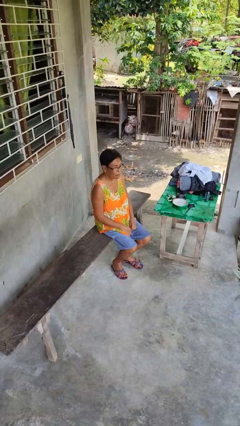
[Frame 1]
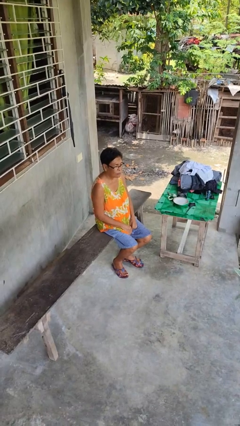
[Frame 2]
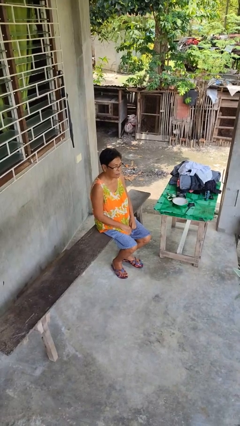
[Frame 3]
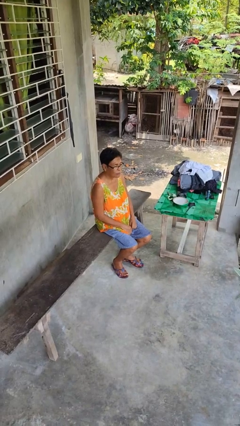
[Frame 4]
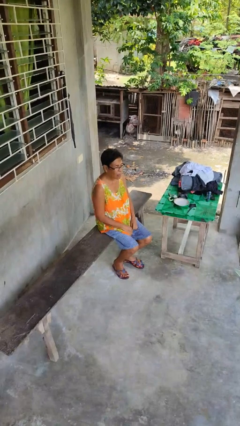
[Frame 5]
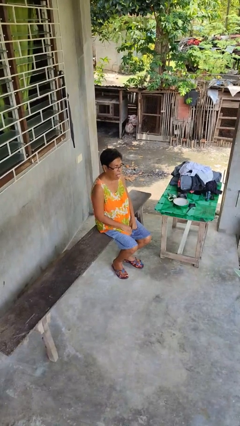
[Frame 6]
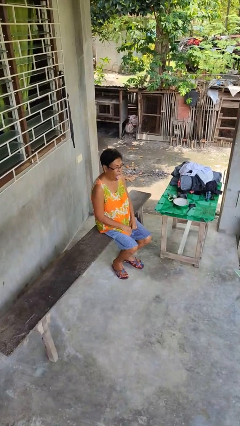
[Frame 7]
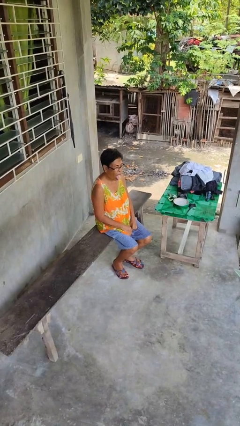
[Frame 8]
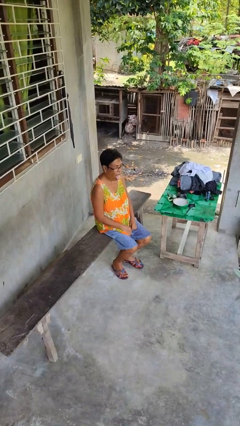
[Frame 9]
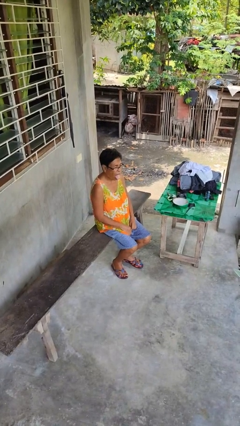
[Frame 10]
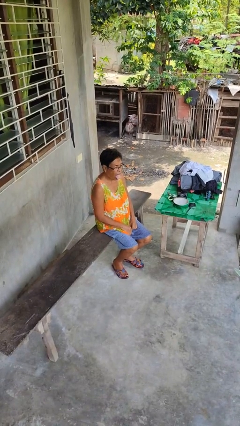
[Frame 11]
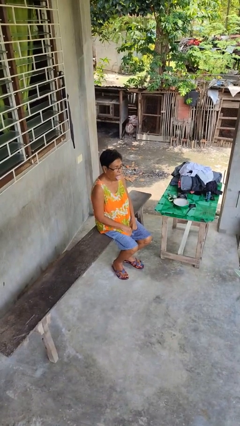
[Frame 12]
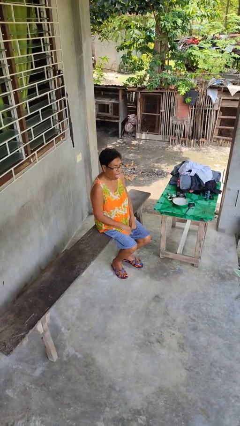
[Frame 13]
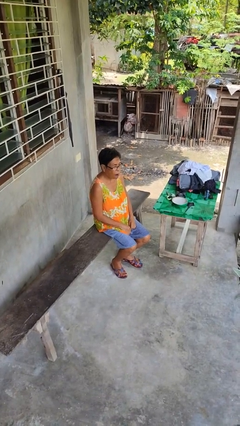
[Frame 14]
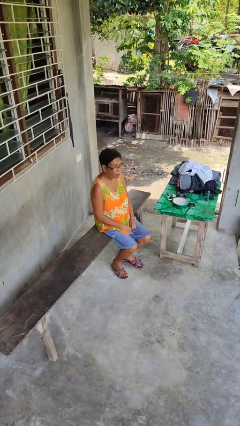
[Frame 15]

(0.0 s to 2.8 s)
person sticks out tongue

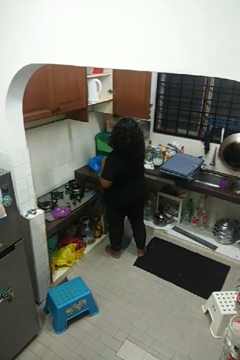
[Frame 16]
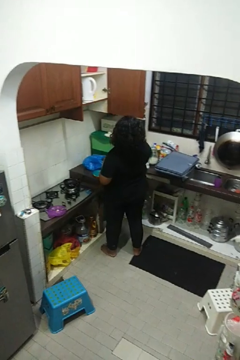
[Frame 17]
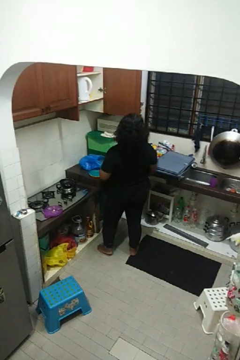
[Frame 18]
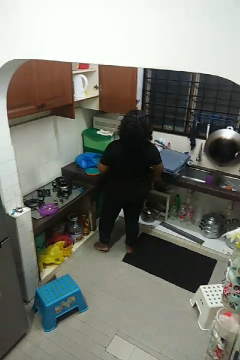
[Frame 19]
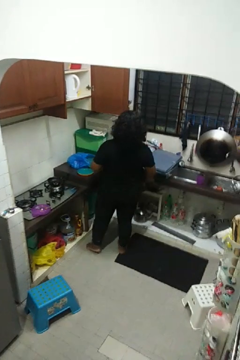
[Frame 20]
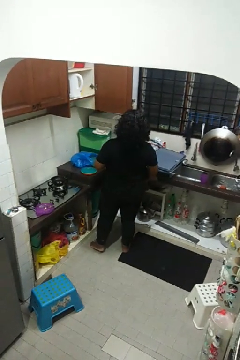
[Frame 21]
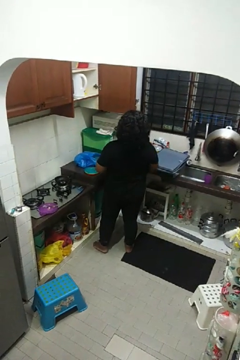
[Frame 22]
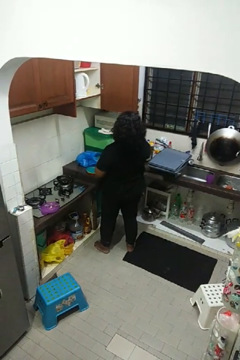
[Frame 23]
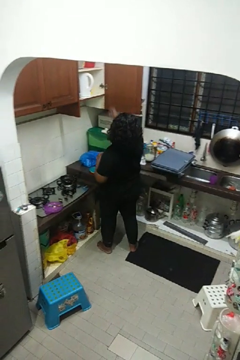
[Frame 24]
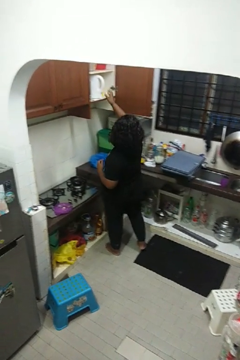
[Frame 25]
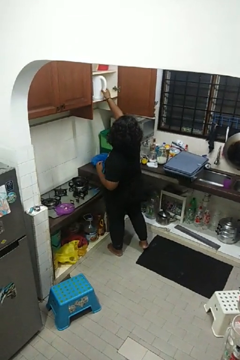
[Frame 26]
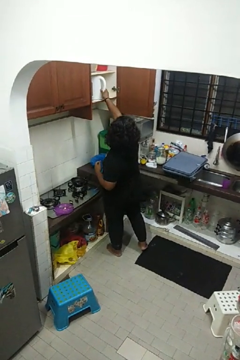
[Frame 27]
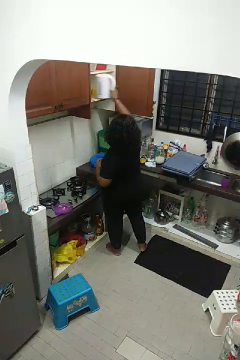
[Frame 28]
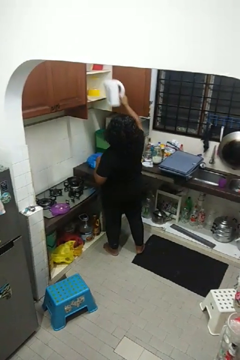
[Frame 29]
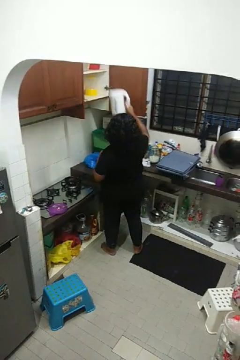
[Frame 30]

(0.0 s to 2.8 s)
person takes object from cabinet

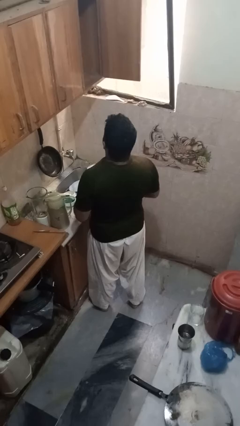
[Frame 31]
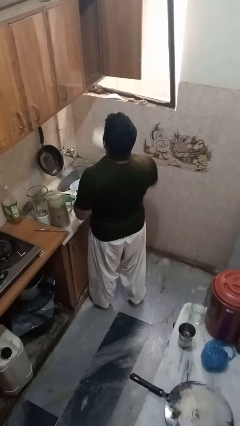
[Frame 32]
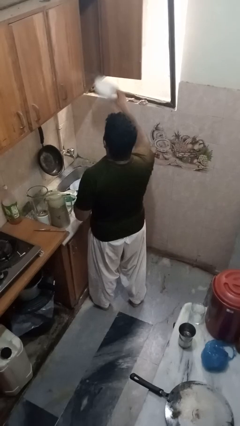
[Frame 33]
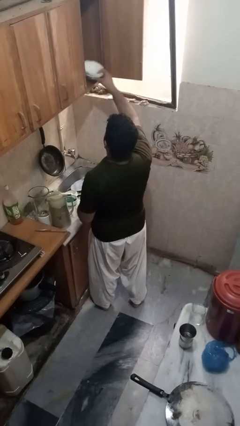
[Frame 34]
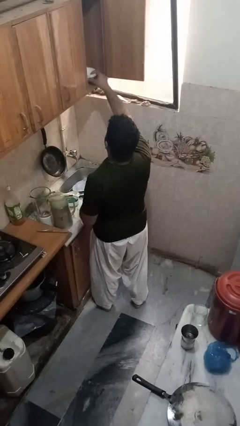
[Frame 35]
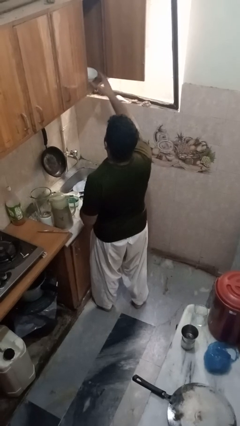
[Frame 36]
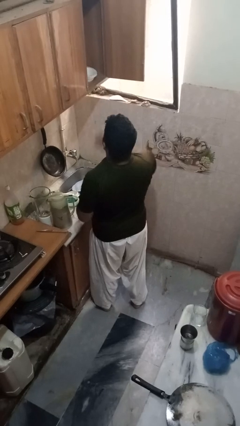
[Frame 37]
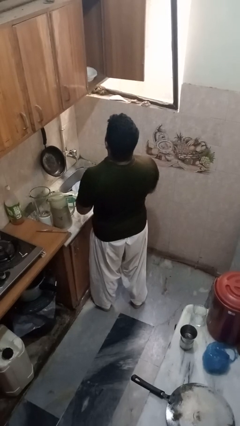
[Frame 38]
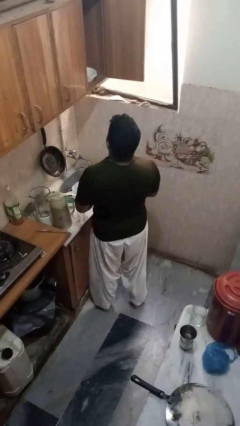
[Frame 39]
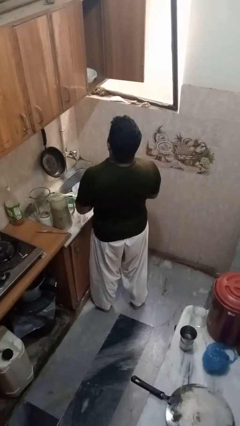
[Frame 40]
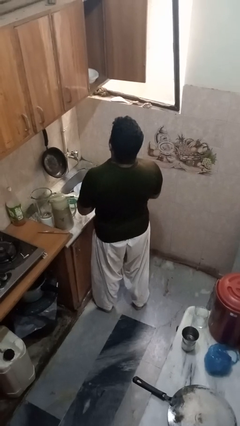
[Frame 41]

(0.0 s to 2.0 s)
person puts object in cabinet

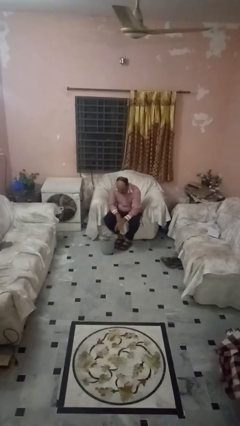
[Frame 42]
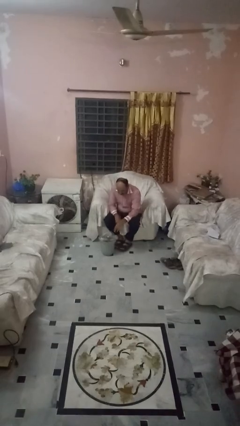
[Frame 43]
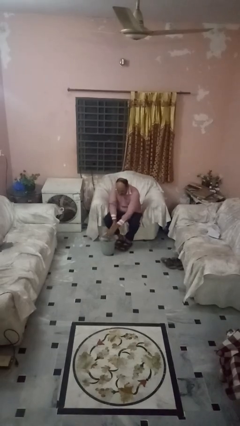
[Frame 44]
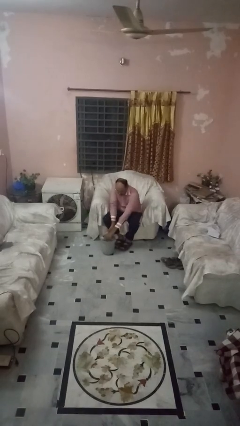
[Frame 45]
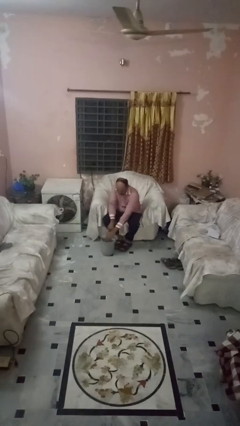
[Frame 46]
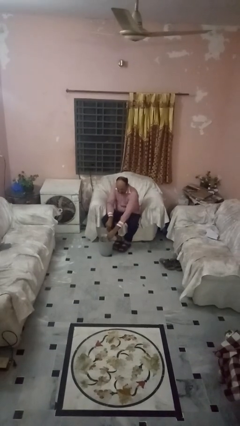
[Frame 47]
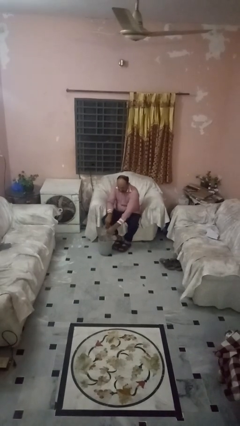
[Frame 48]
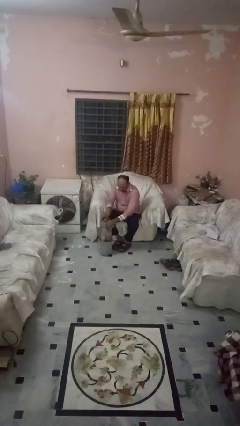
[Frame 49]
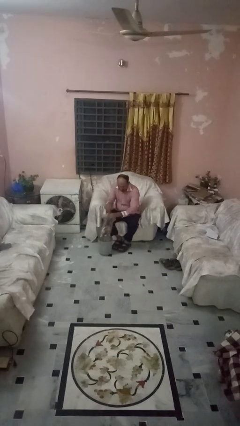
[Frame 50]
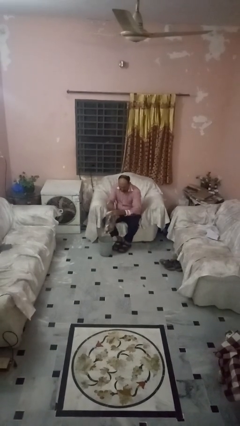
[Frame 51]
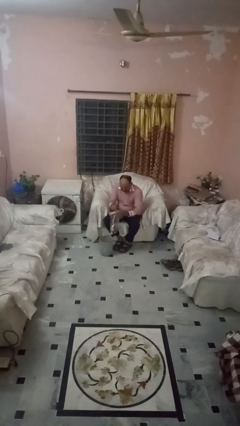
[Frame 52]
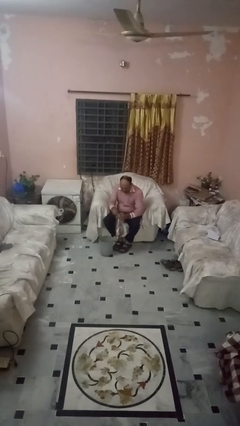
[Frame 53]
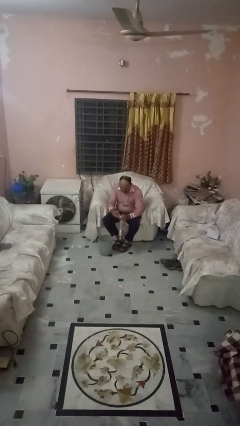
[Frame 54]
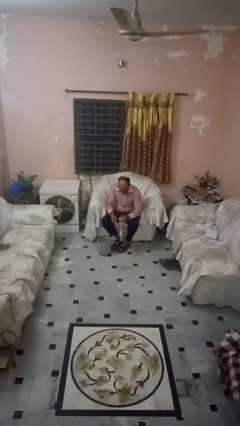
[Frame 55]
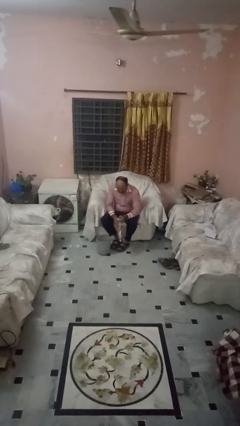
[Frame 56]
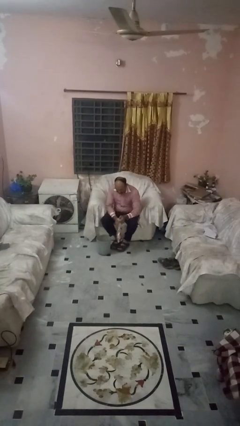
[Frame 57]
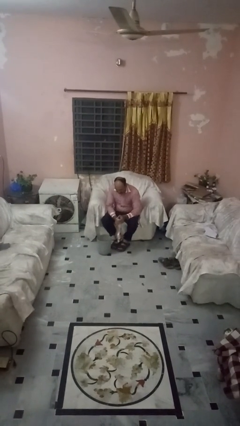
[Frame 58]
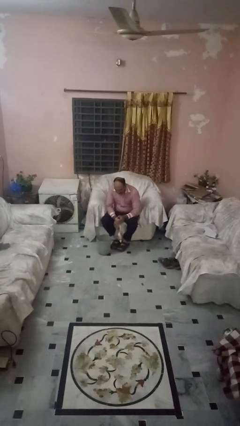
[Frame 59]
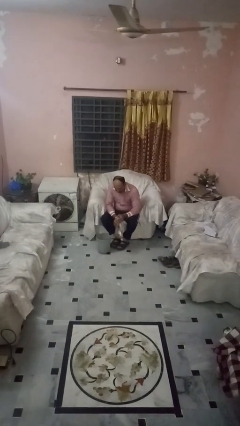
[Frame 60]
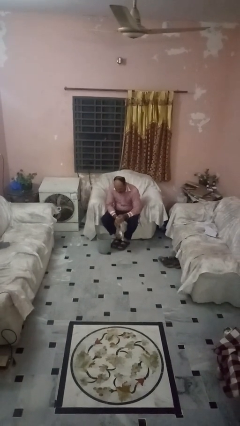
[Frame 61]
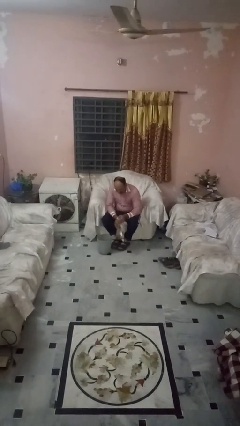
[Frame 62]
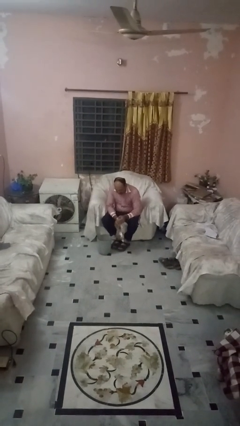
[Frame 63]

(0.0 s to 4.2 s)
person removes trashbag from trashcan

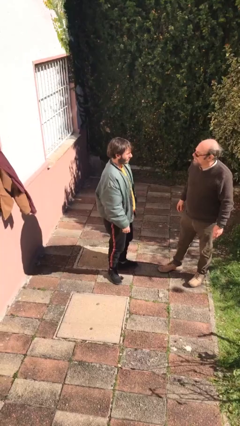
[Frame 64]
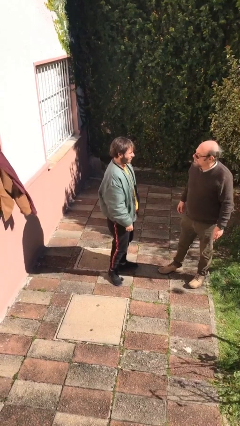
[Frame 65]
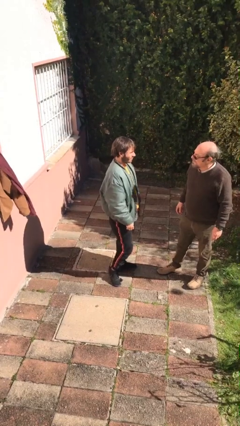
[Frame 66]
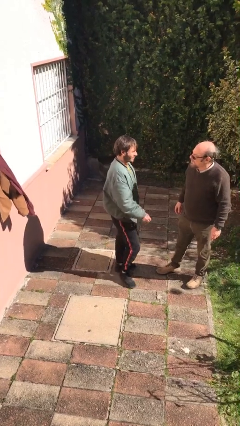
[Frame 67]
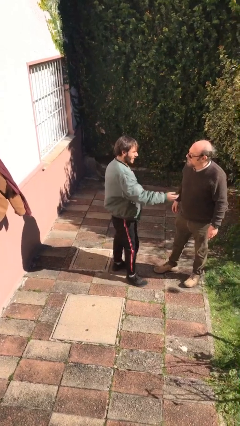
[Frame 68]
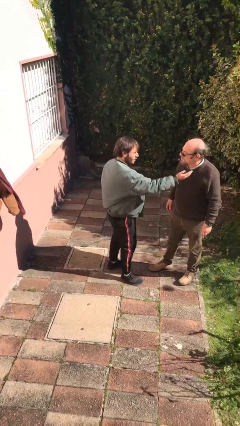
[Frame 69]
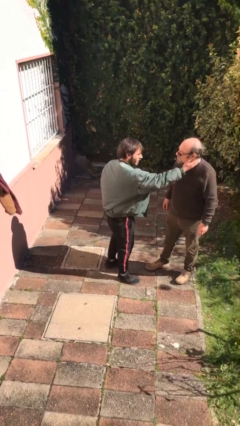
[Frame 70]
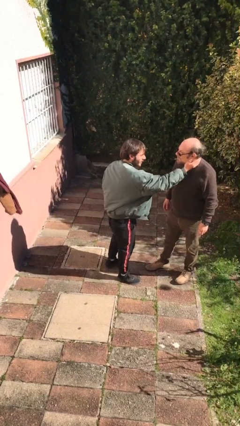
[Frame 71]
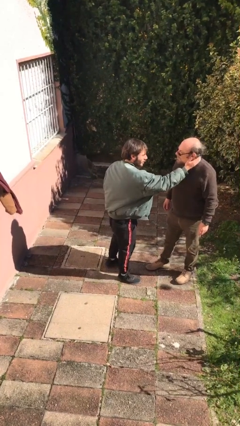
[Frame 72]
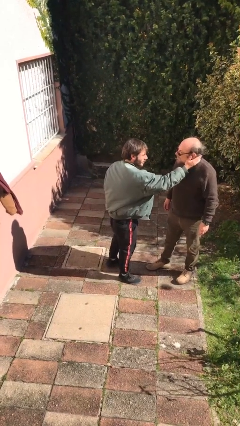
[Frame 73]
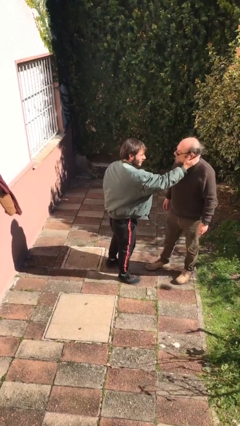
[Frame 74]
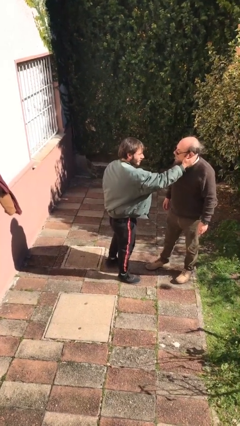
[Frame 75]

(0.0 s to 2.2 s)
person touches face of person

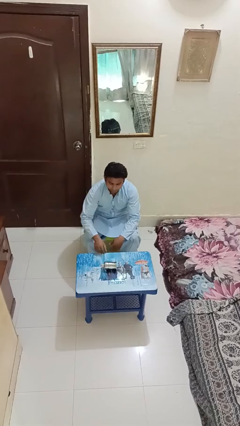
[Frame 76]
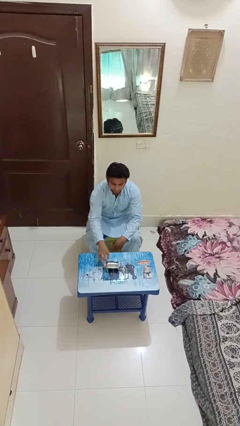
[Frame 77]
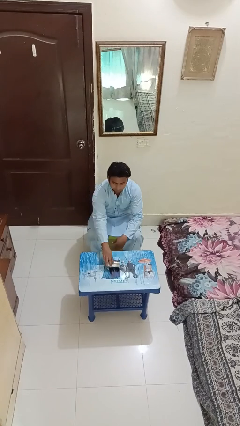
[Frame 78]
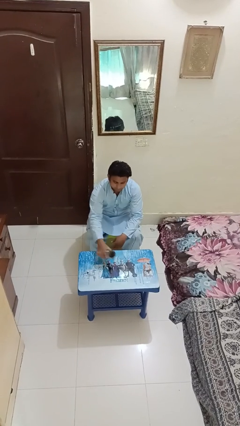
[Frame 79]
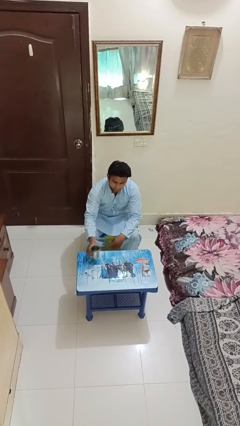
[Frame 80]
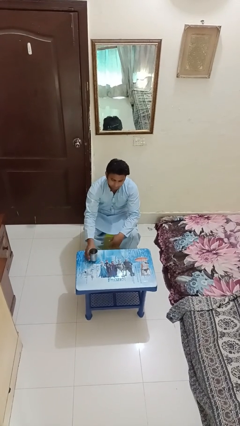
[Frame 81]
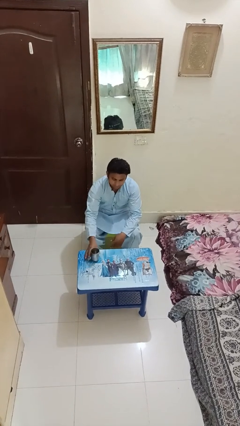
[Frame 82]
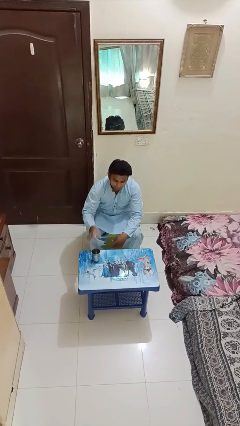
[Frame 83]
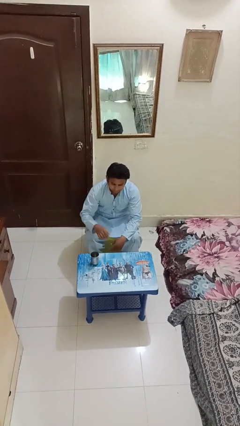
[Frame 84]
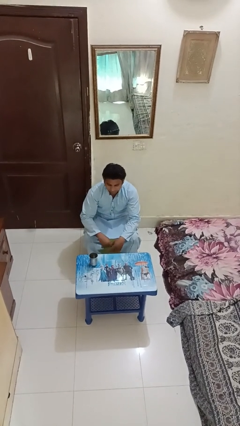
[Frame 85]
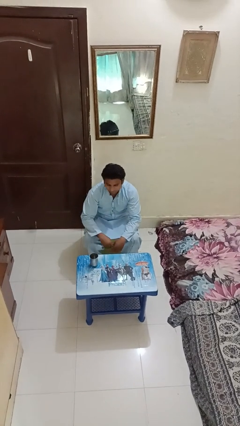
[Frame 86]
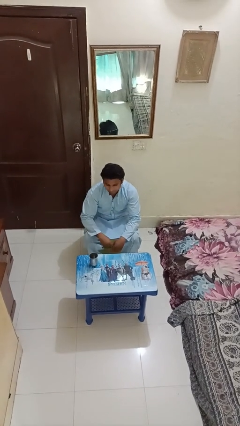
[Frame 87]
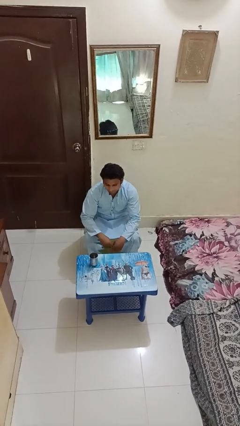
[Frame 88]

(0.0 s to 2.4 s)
person sets upright glass

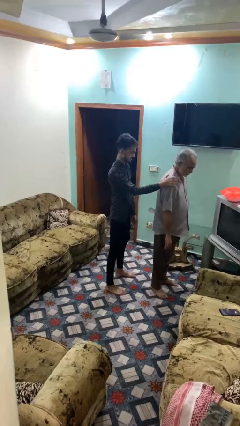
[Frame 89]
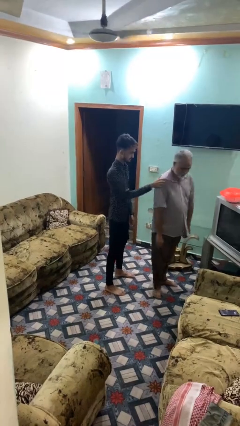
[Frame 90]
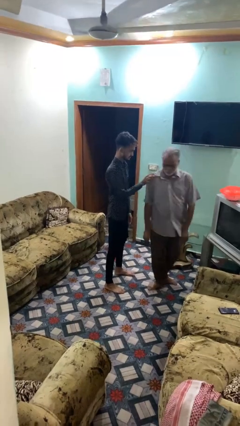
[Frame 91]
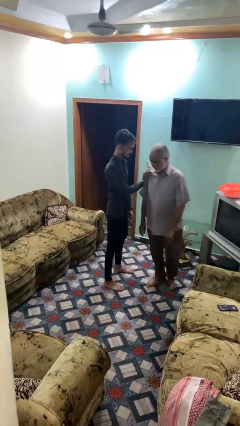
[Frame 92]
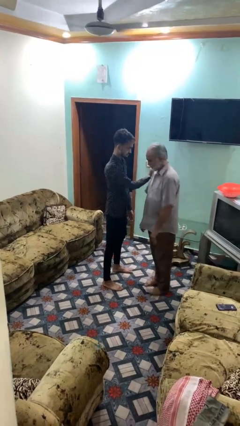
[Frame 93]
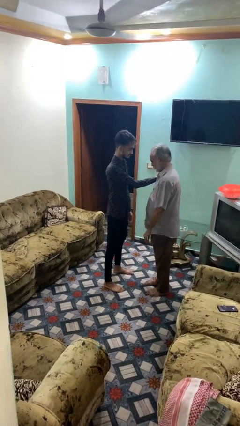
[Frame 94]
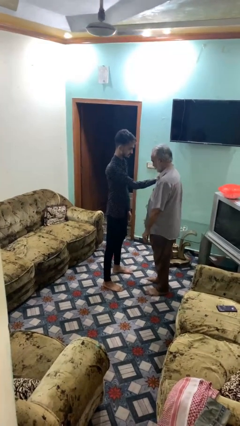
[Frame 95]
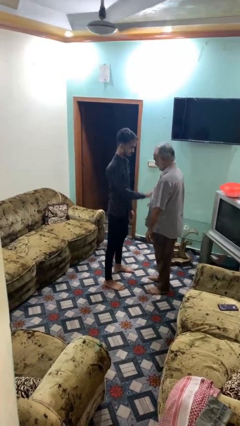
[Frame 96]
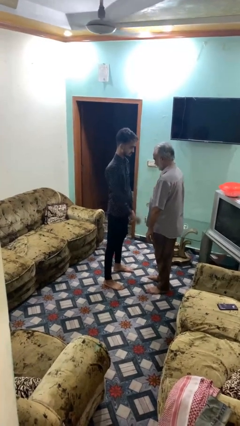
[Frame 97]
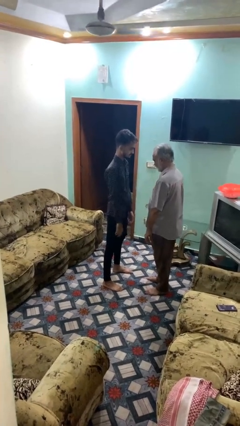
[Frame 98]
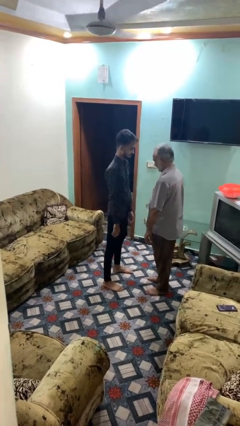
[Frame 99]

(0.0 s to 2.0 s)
person spins person around
